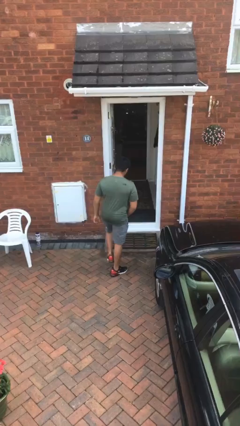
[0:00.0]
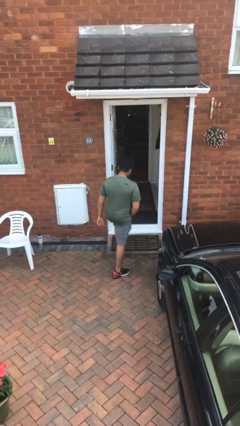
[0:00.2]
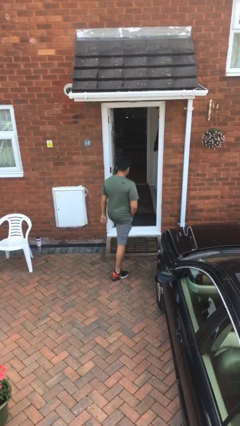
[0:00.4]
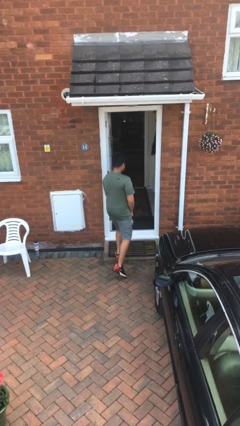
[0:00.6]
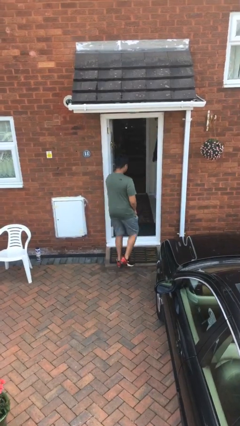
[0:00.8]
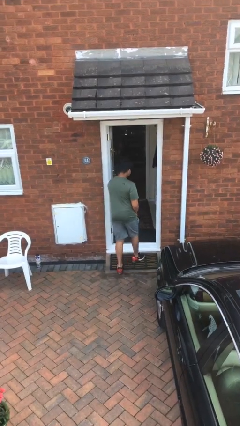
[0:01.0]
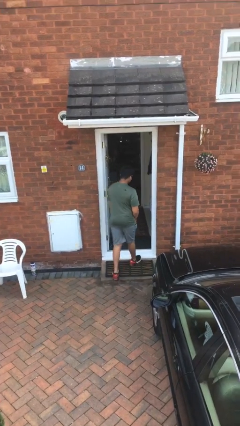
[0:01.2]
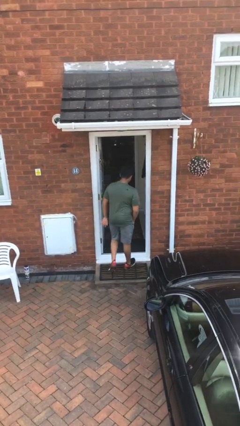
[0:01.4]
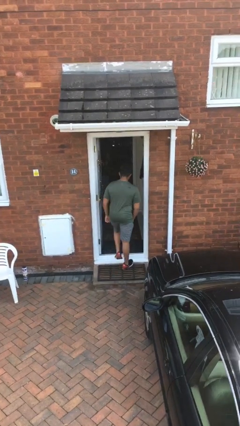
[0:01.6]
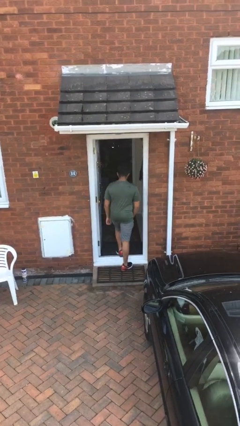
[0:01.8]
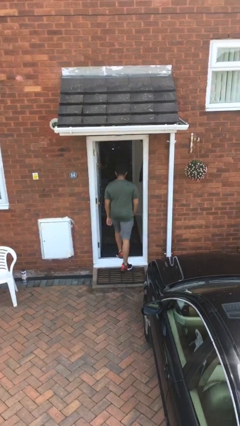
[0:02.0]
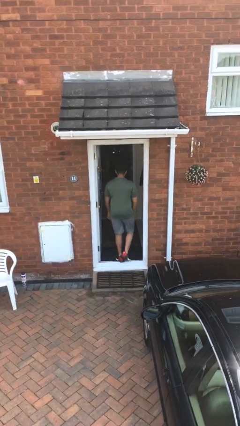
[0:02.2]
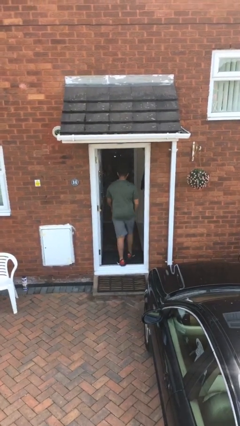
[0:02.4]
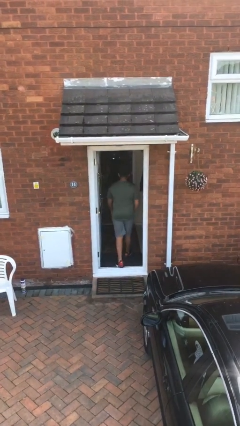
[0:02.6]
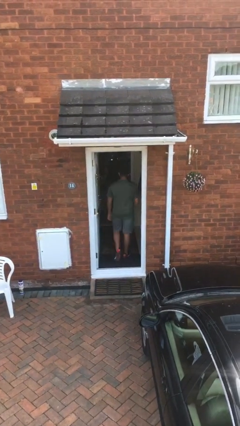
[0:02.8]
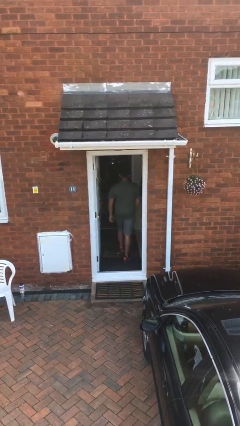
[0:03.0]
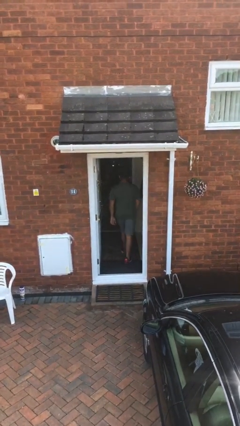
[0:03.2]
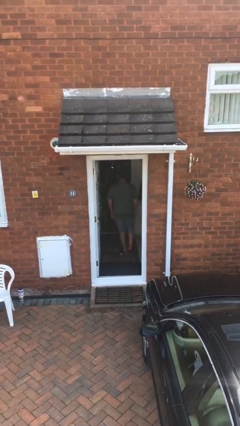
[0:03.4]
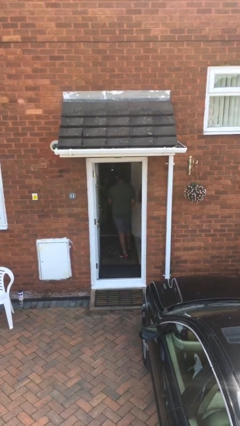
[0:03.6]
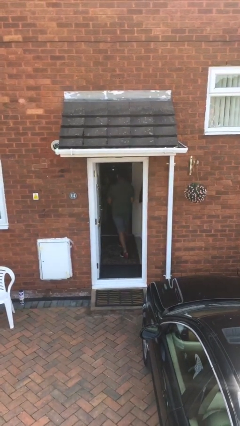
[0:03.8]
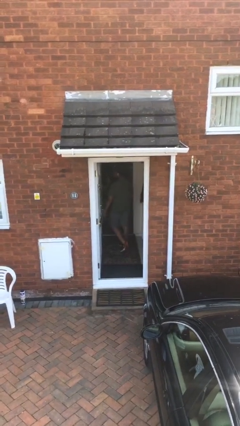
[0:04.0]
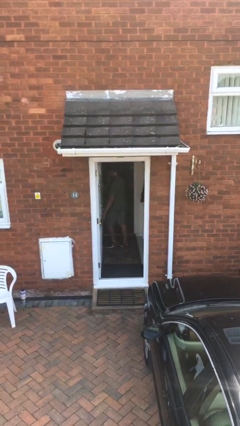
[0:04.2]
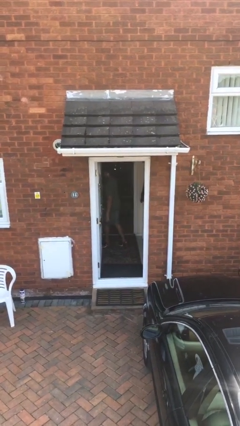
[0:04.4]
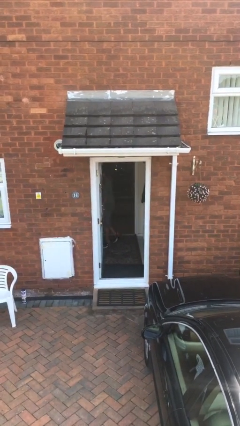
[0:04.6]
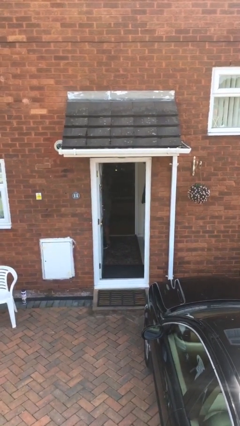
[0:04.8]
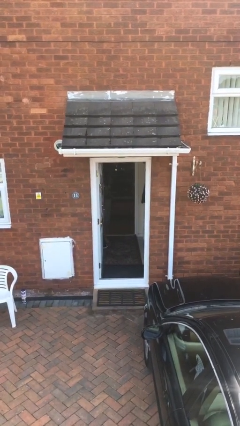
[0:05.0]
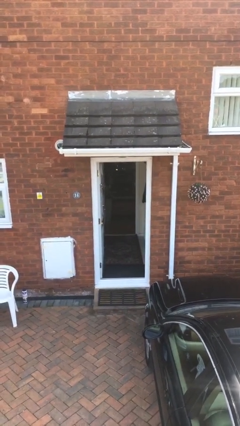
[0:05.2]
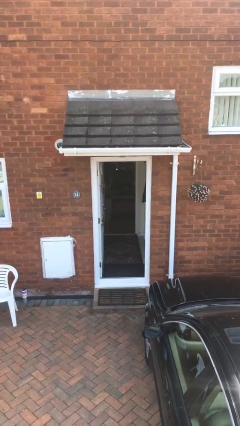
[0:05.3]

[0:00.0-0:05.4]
person exits scene through structure

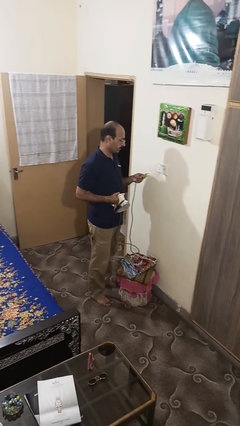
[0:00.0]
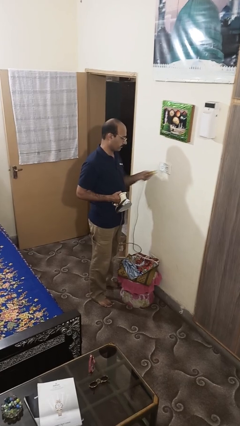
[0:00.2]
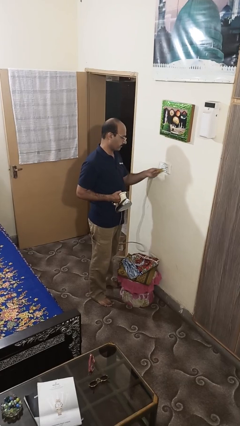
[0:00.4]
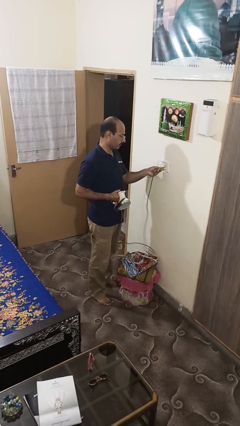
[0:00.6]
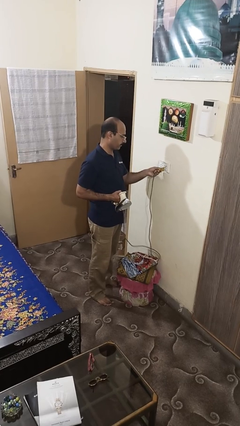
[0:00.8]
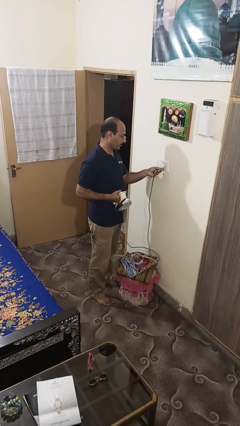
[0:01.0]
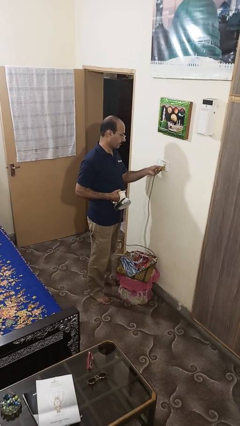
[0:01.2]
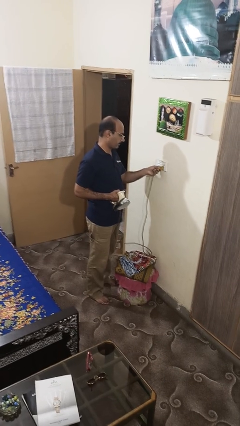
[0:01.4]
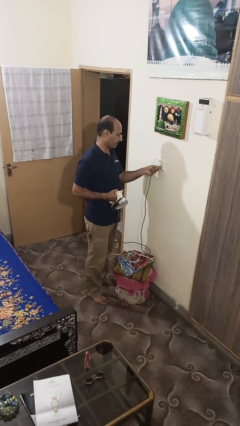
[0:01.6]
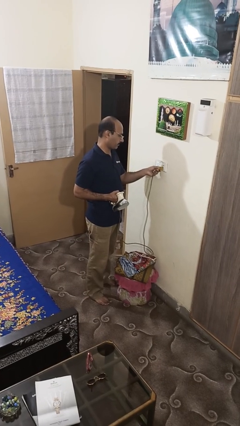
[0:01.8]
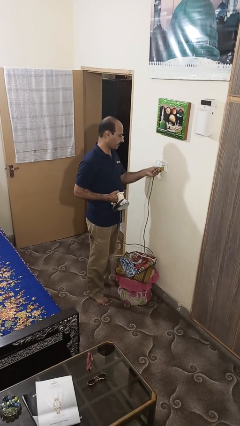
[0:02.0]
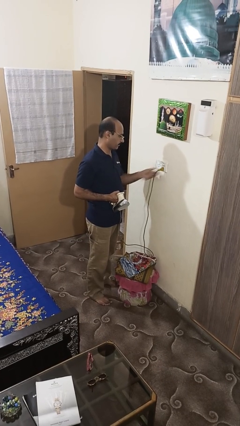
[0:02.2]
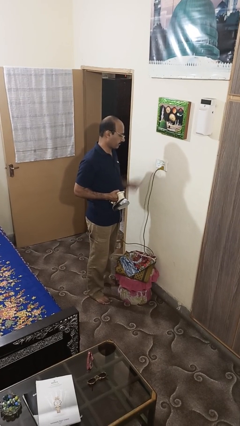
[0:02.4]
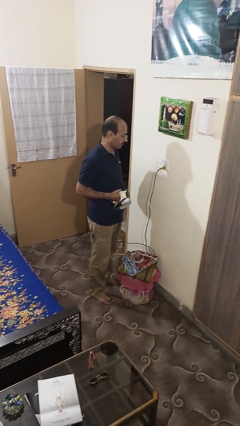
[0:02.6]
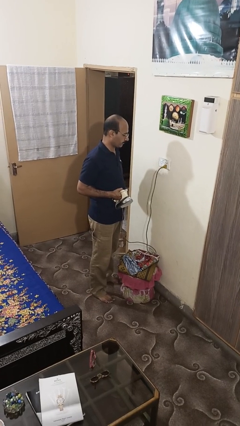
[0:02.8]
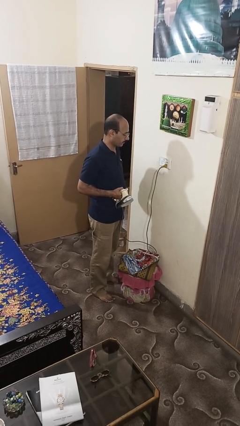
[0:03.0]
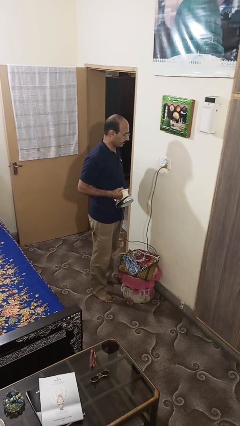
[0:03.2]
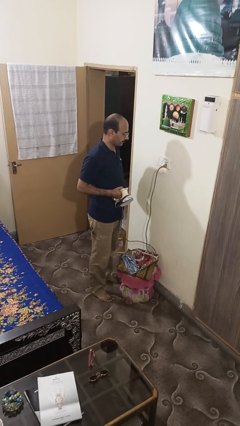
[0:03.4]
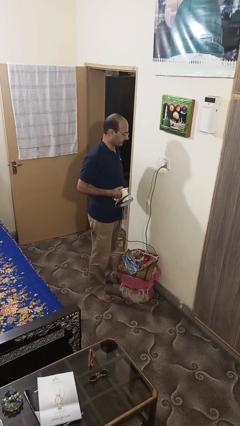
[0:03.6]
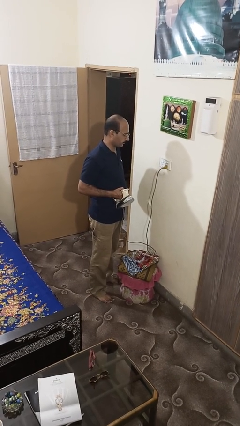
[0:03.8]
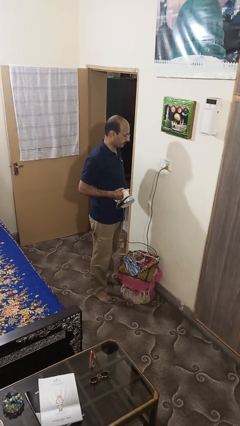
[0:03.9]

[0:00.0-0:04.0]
person plugs into electrical socket

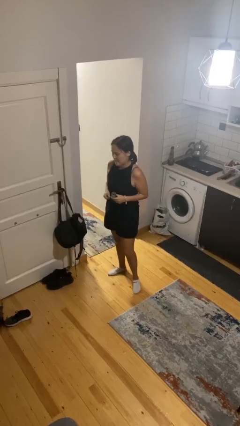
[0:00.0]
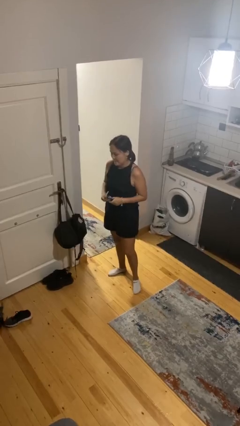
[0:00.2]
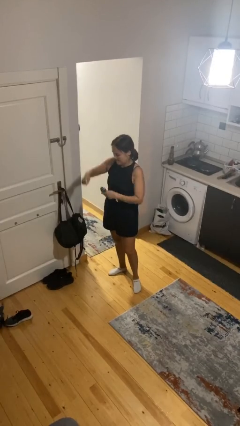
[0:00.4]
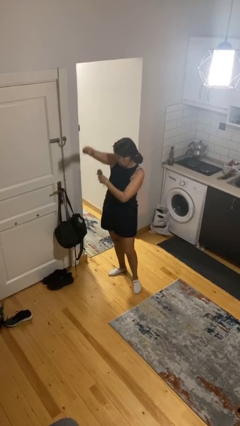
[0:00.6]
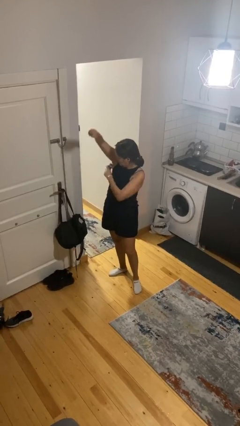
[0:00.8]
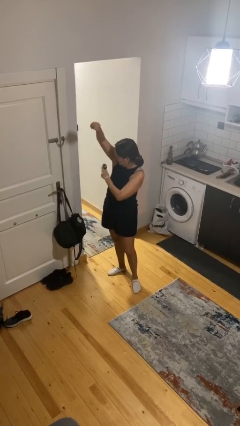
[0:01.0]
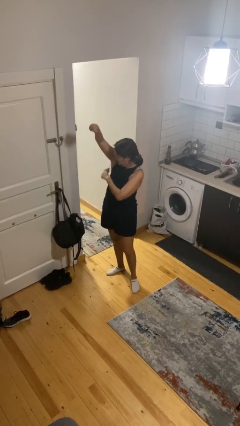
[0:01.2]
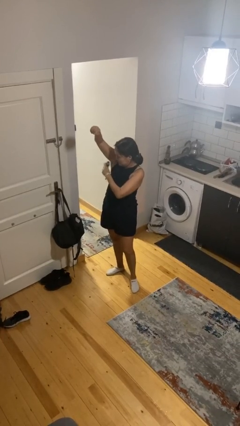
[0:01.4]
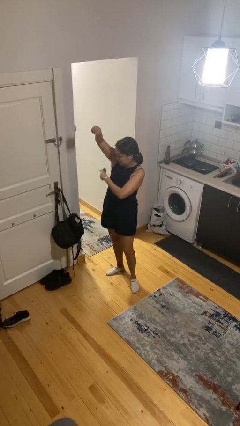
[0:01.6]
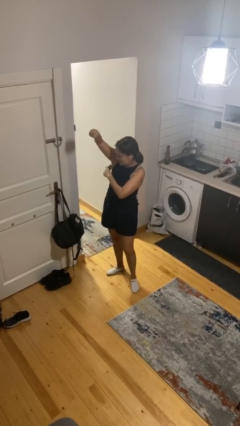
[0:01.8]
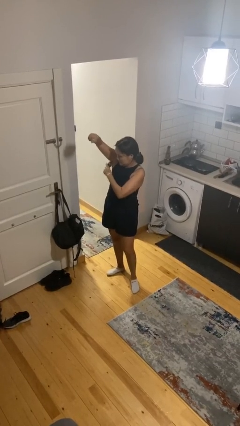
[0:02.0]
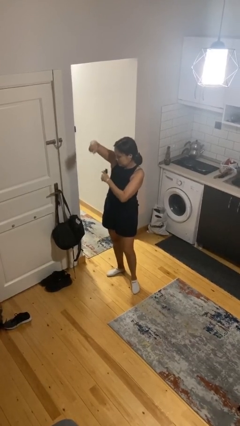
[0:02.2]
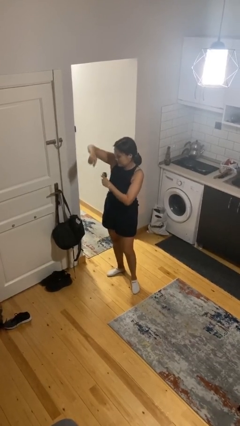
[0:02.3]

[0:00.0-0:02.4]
person applies deodorant

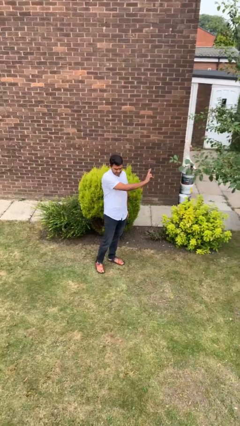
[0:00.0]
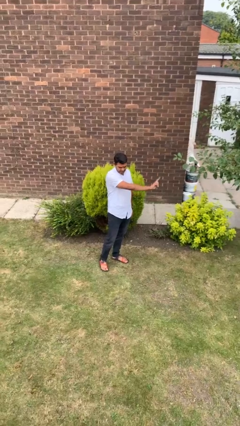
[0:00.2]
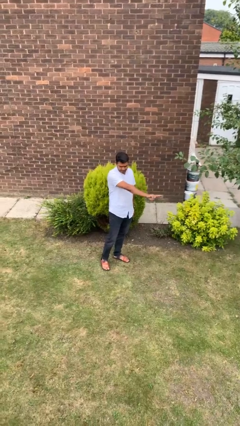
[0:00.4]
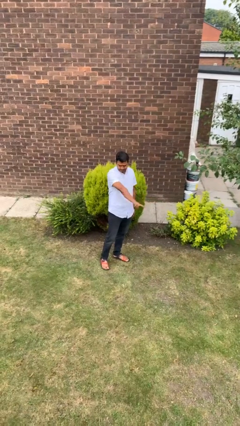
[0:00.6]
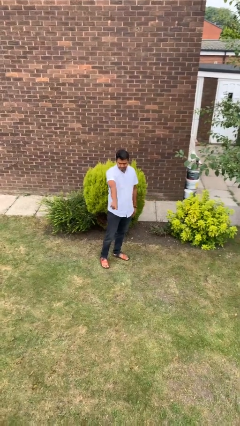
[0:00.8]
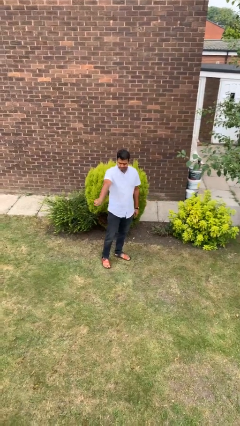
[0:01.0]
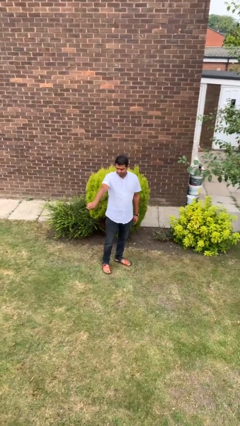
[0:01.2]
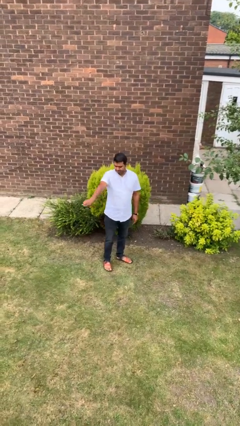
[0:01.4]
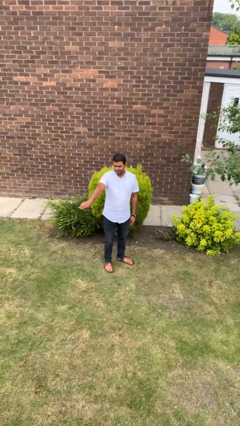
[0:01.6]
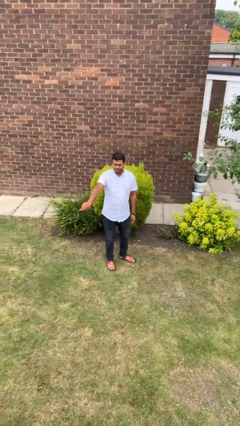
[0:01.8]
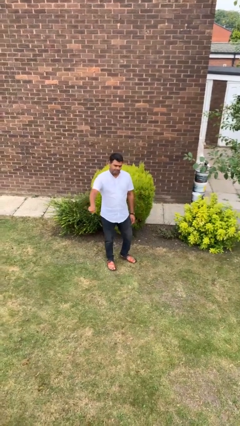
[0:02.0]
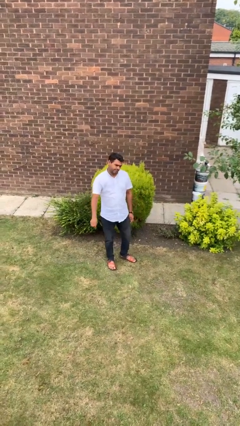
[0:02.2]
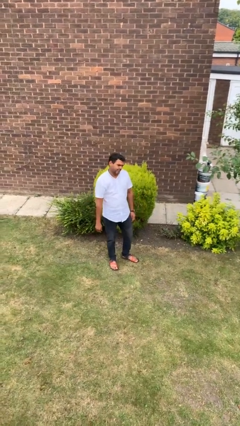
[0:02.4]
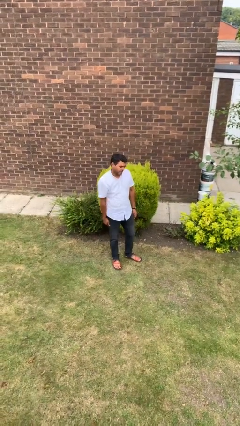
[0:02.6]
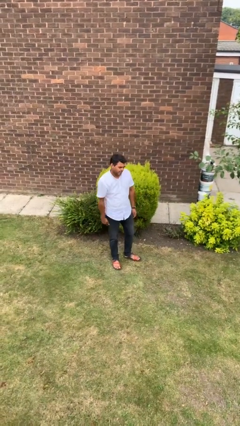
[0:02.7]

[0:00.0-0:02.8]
person gestures swipe right

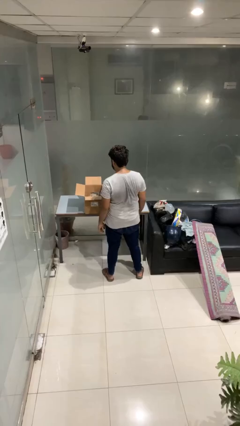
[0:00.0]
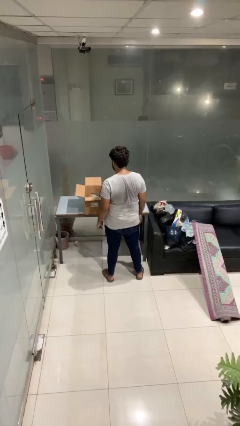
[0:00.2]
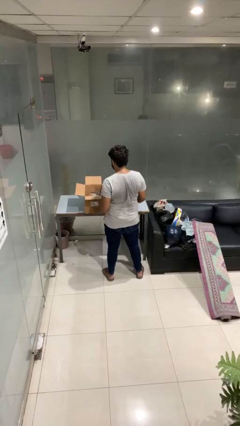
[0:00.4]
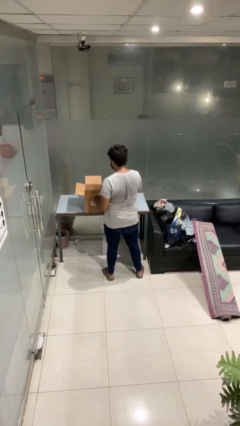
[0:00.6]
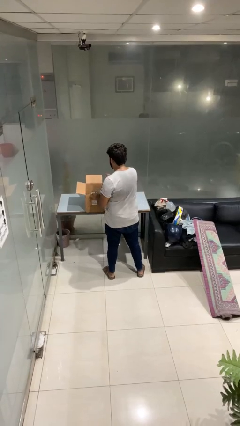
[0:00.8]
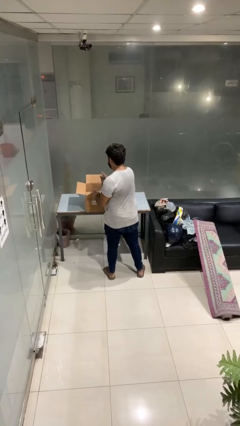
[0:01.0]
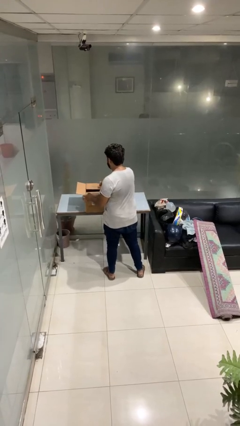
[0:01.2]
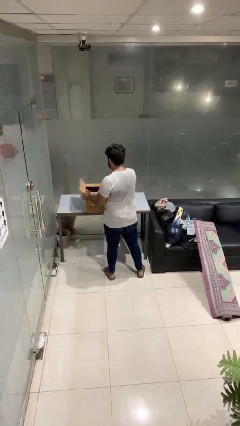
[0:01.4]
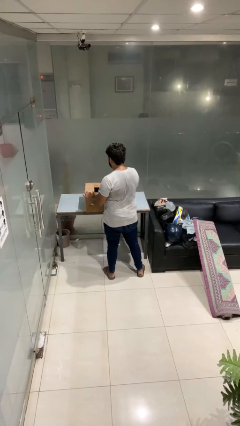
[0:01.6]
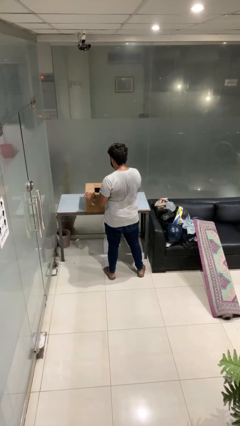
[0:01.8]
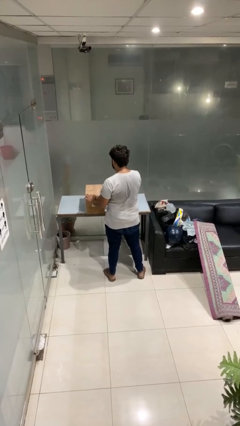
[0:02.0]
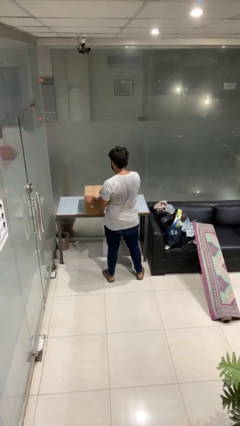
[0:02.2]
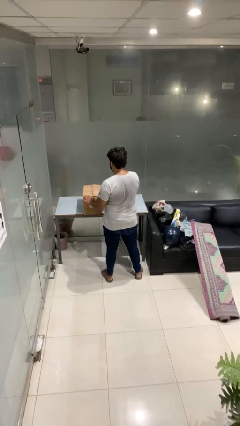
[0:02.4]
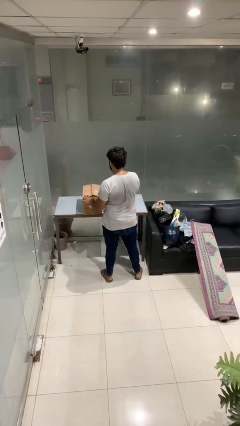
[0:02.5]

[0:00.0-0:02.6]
person closes box

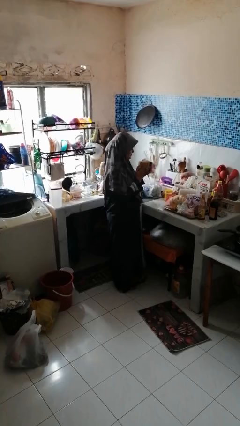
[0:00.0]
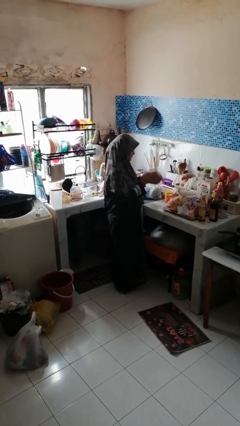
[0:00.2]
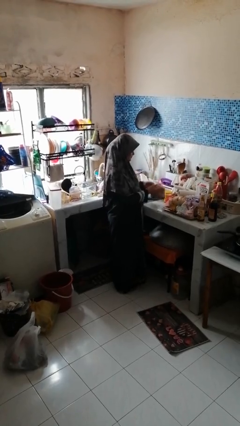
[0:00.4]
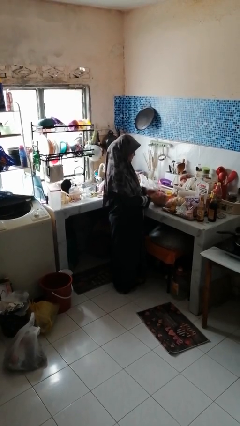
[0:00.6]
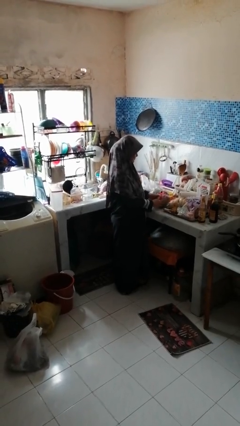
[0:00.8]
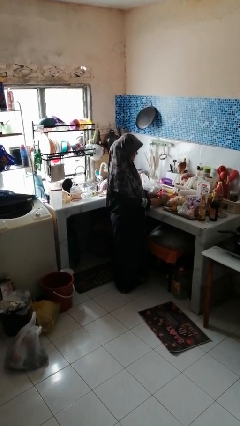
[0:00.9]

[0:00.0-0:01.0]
person puts down object on countertop
